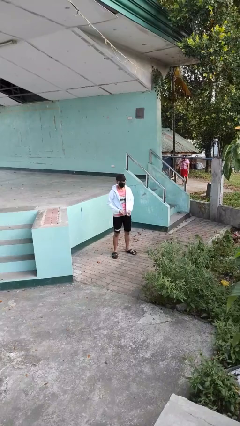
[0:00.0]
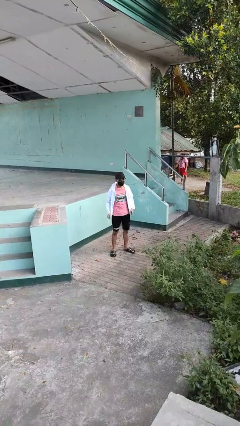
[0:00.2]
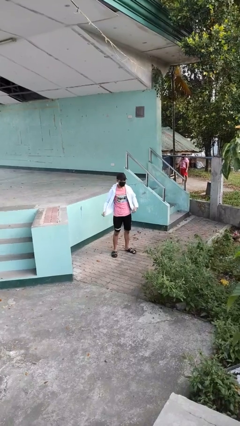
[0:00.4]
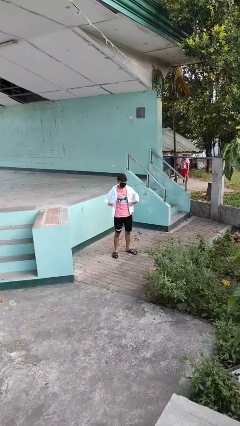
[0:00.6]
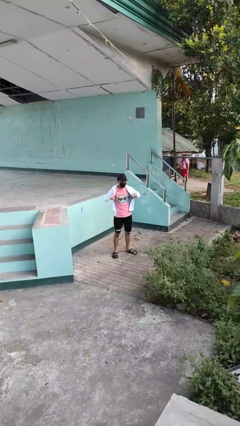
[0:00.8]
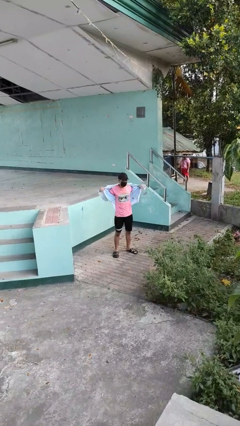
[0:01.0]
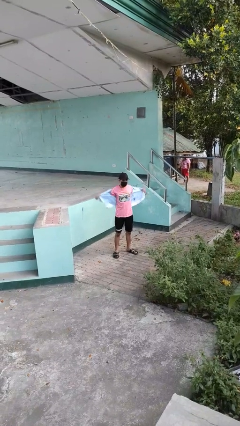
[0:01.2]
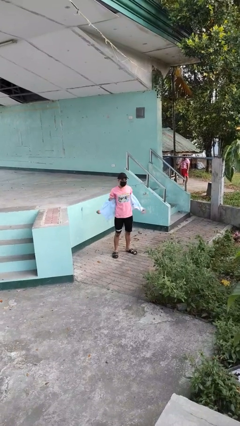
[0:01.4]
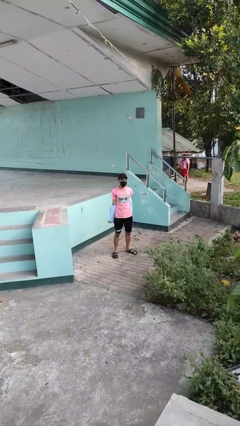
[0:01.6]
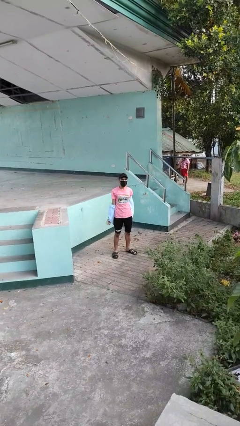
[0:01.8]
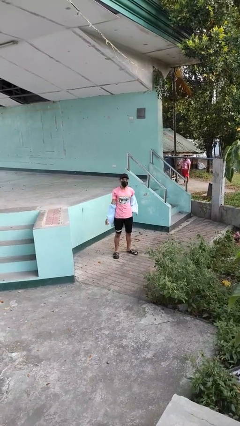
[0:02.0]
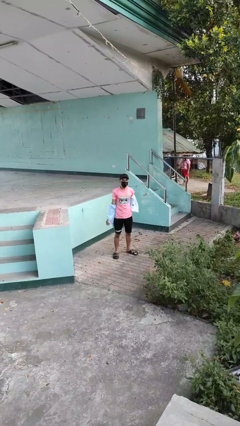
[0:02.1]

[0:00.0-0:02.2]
person takes off jacket

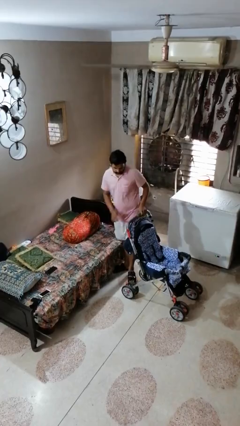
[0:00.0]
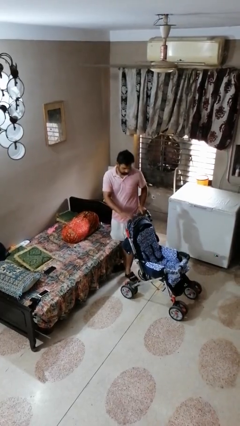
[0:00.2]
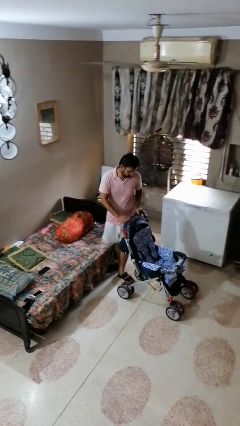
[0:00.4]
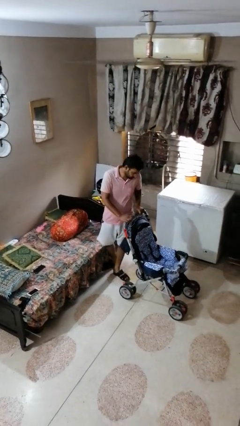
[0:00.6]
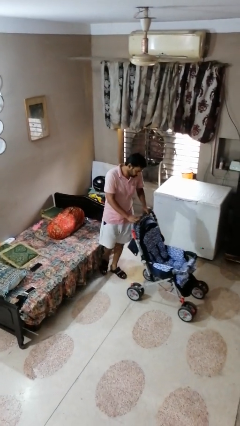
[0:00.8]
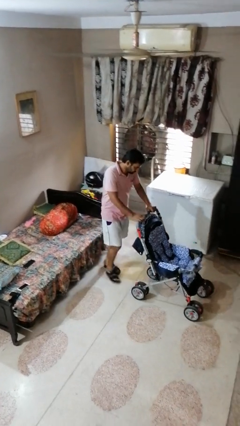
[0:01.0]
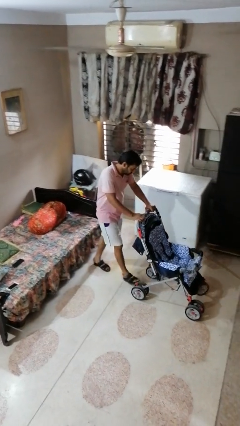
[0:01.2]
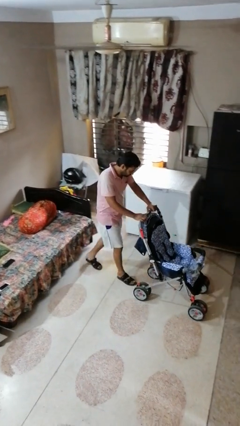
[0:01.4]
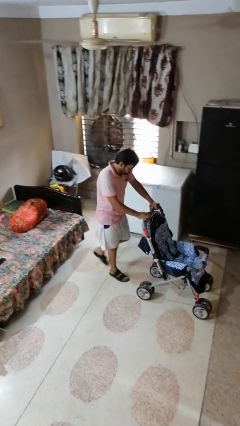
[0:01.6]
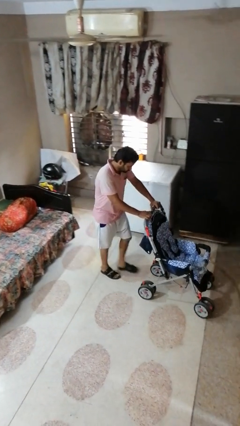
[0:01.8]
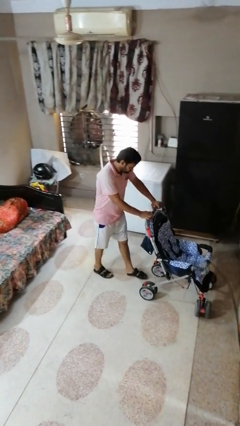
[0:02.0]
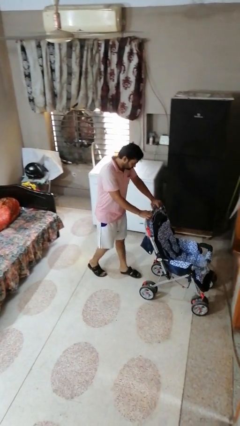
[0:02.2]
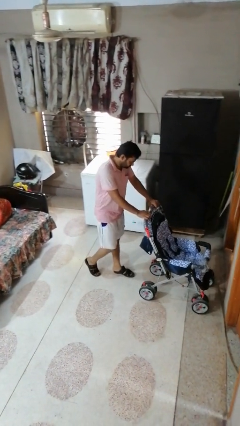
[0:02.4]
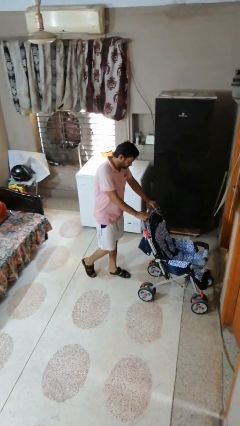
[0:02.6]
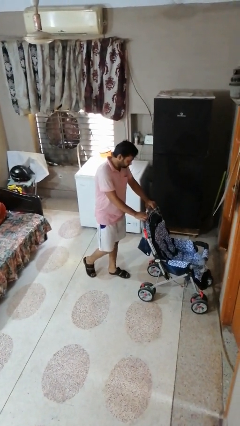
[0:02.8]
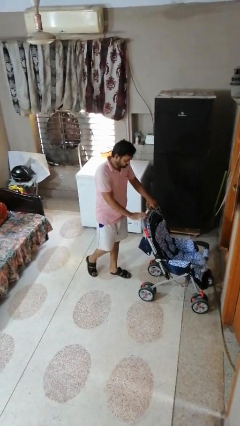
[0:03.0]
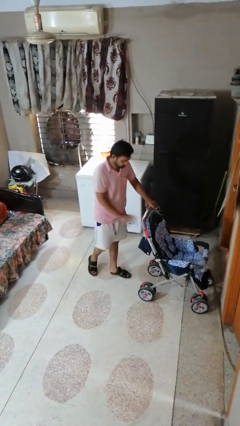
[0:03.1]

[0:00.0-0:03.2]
person pushes wheeled cart

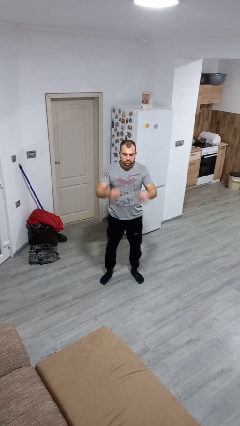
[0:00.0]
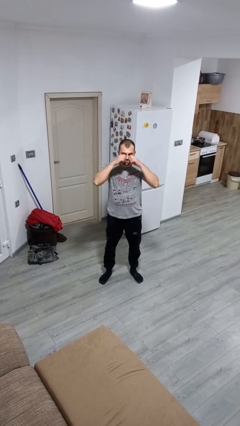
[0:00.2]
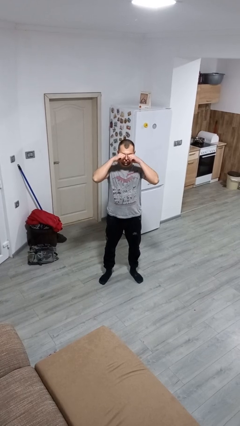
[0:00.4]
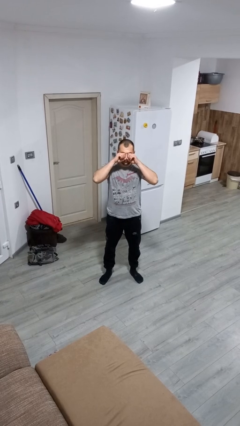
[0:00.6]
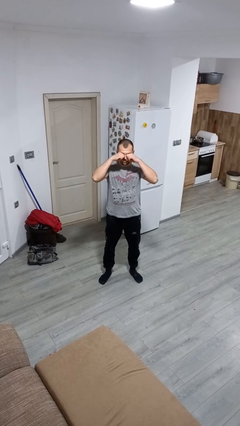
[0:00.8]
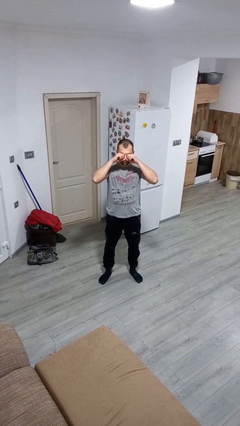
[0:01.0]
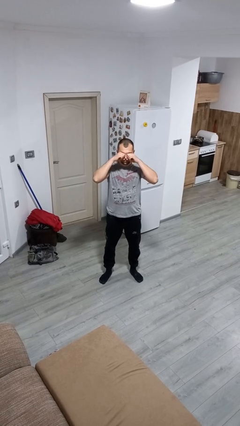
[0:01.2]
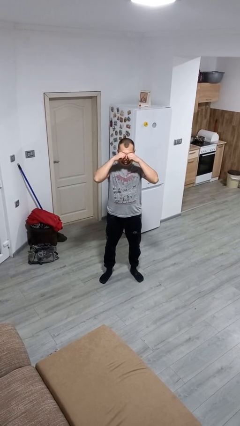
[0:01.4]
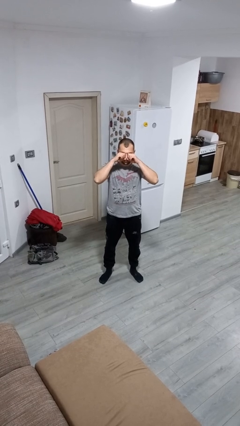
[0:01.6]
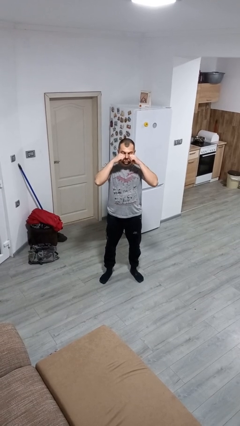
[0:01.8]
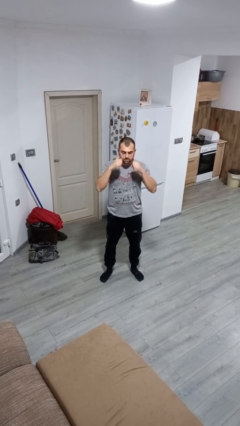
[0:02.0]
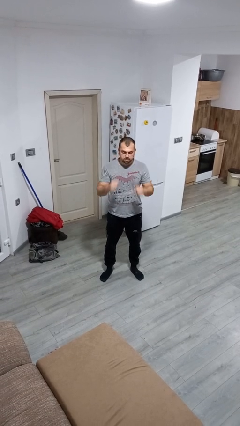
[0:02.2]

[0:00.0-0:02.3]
person rubs eyes

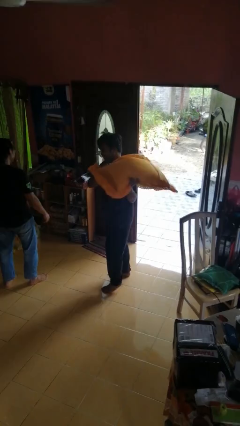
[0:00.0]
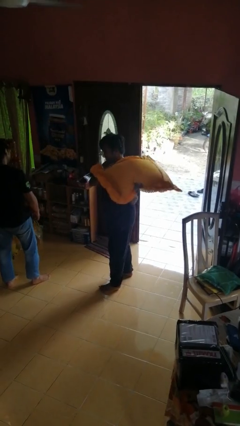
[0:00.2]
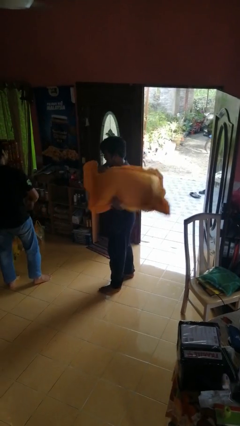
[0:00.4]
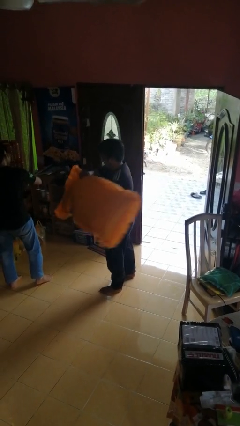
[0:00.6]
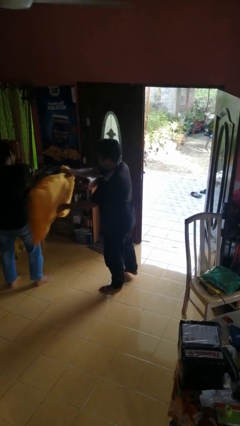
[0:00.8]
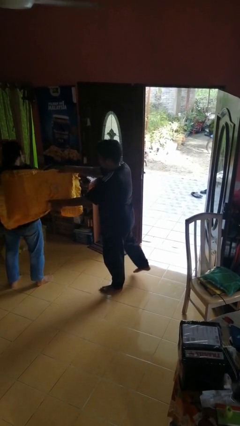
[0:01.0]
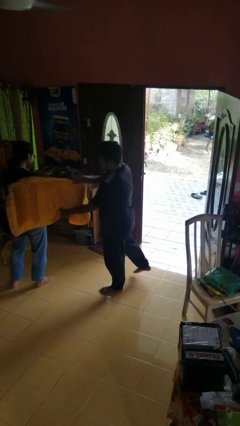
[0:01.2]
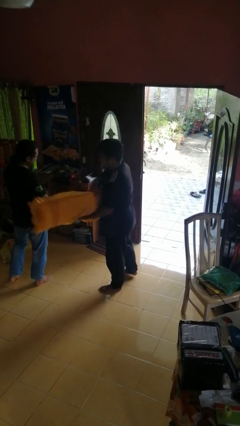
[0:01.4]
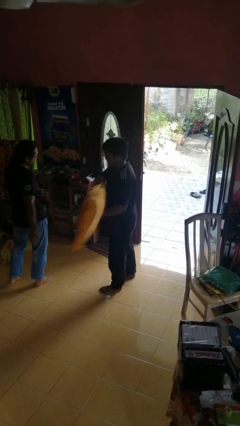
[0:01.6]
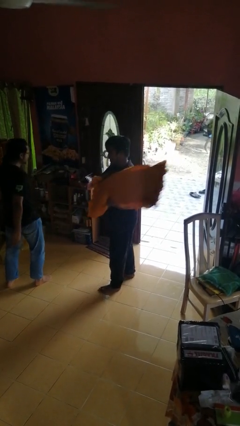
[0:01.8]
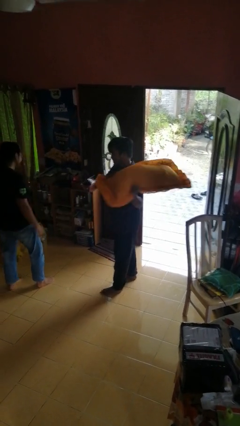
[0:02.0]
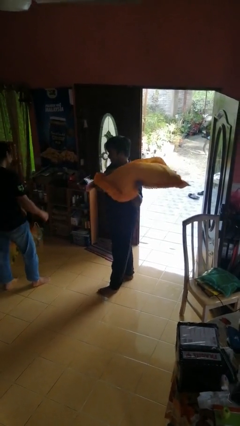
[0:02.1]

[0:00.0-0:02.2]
person hits person with pillow

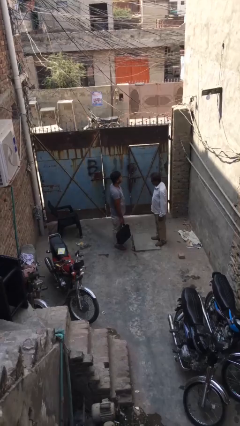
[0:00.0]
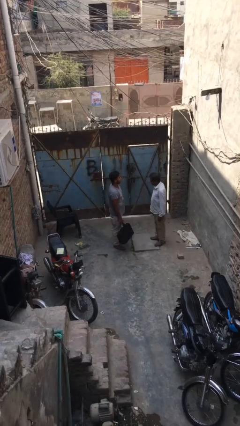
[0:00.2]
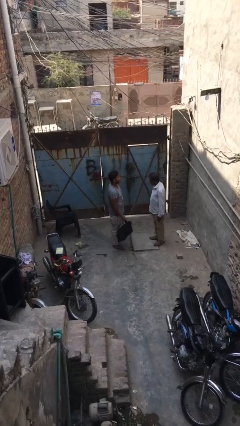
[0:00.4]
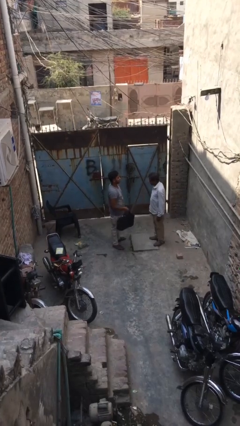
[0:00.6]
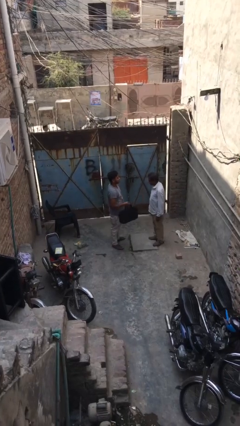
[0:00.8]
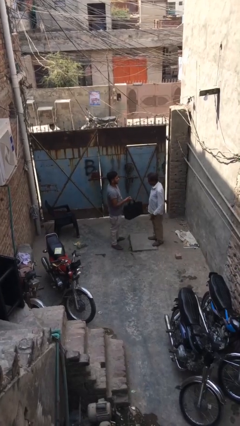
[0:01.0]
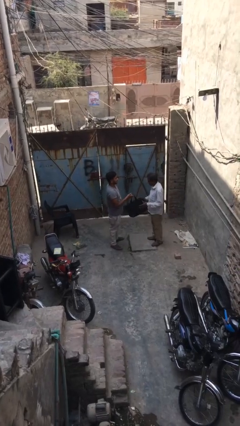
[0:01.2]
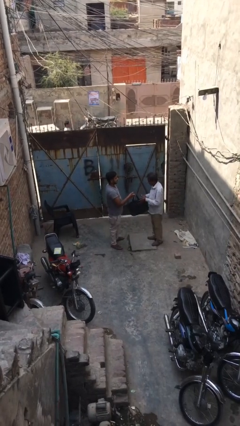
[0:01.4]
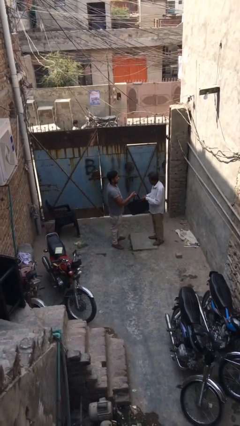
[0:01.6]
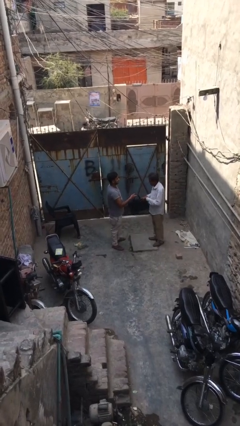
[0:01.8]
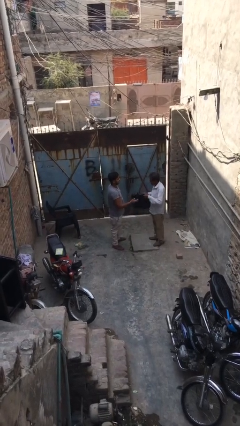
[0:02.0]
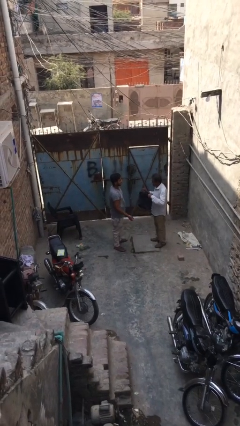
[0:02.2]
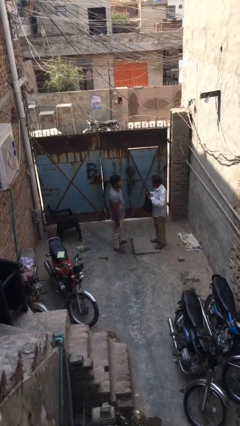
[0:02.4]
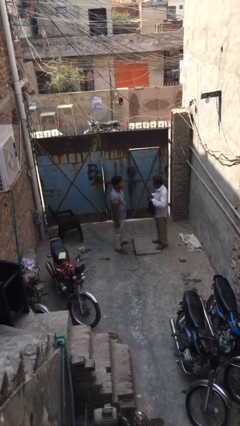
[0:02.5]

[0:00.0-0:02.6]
person transfers object to person

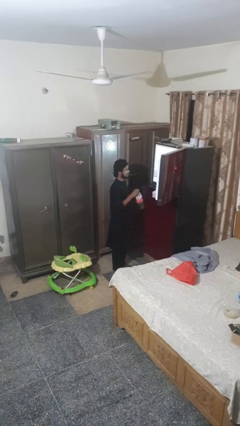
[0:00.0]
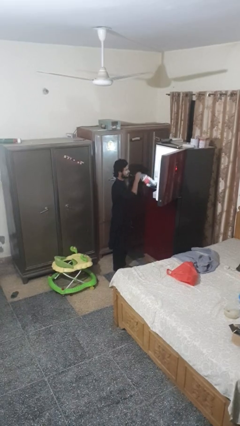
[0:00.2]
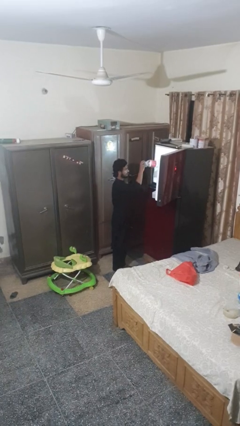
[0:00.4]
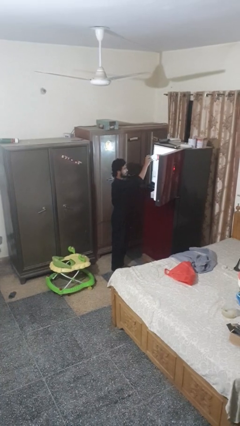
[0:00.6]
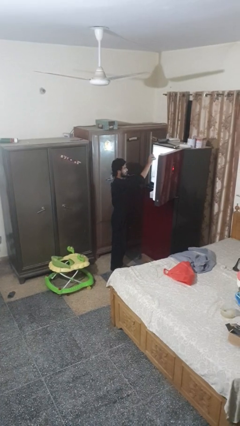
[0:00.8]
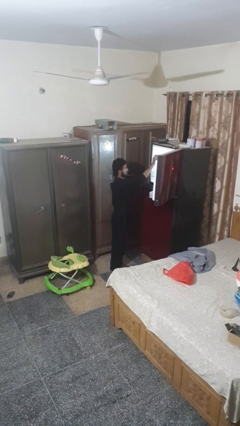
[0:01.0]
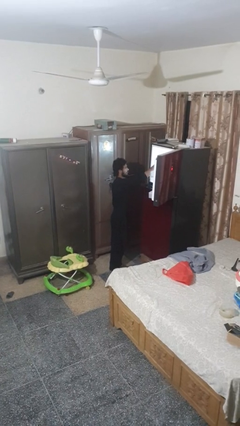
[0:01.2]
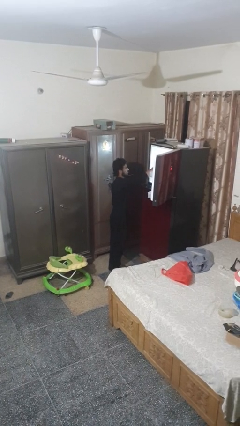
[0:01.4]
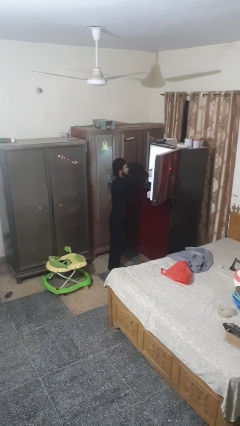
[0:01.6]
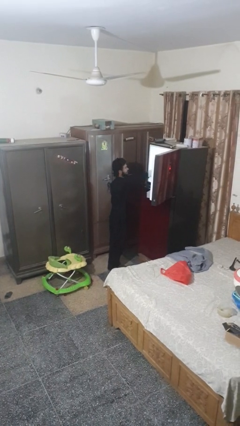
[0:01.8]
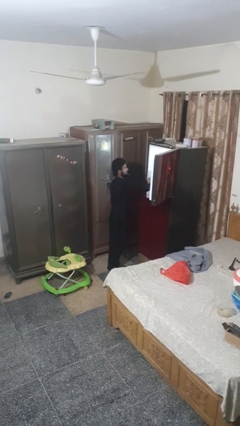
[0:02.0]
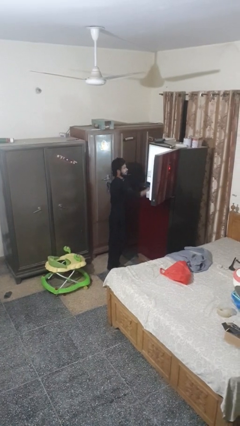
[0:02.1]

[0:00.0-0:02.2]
person puts object into refrigerator

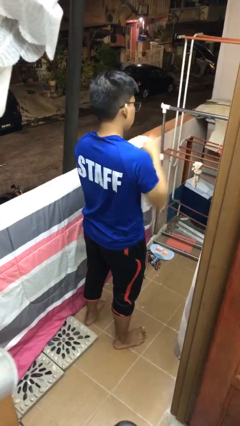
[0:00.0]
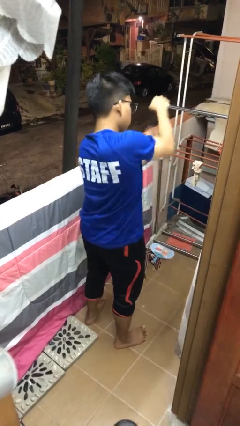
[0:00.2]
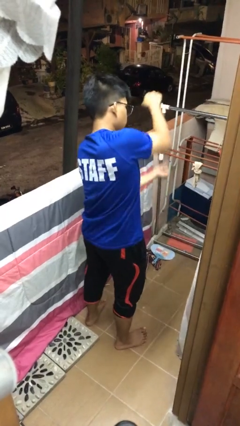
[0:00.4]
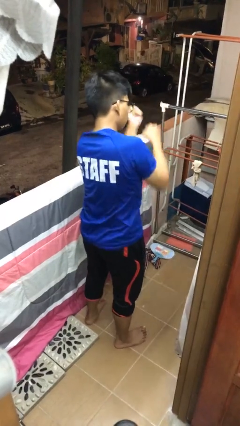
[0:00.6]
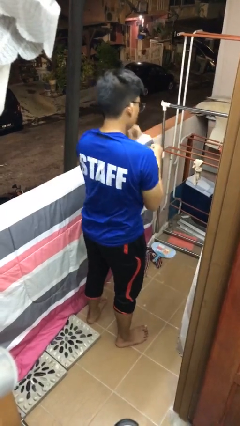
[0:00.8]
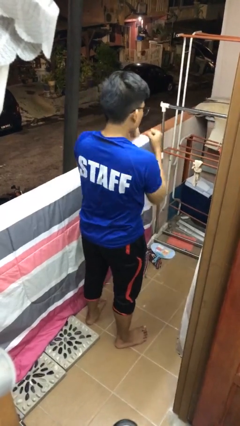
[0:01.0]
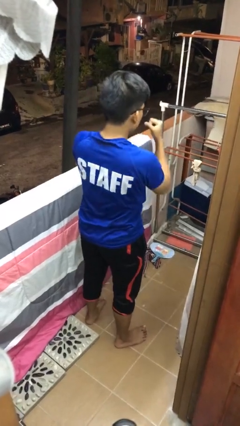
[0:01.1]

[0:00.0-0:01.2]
person punches

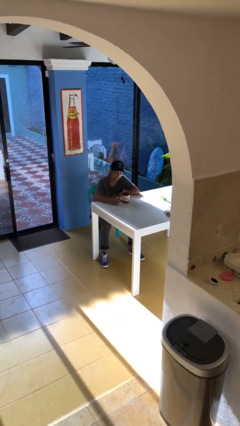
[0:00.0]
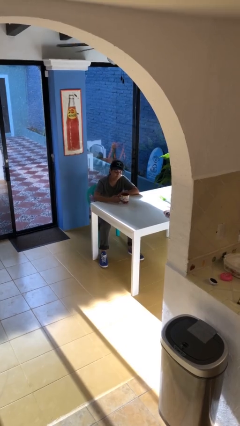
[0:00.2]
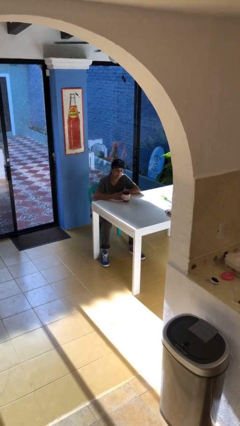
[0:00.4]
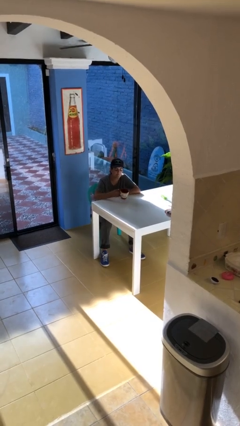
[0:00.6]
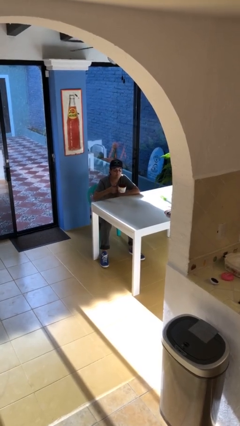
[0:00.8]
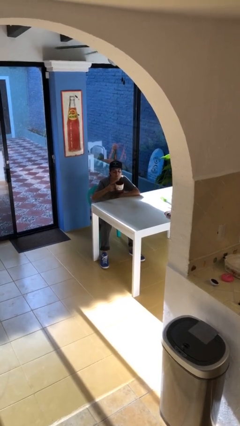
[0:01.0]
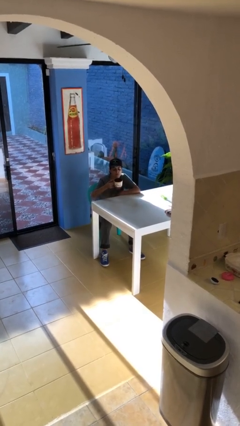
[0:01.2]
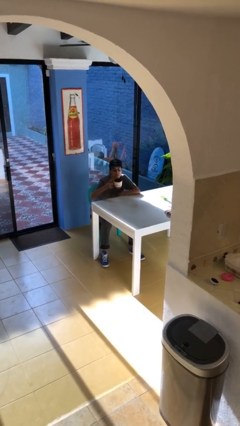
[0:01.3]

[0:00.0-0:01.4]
person picks up object from table
